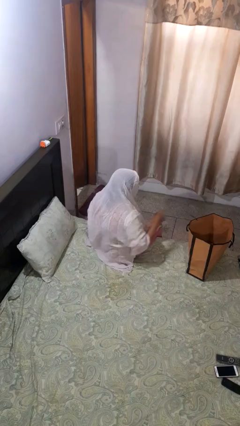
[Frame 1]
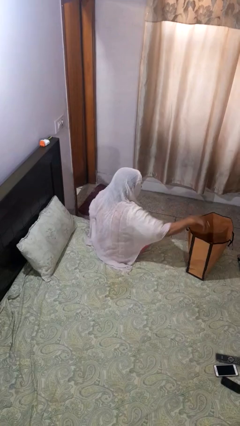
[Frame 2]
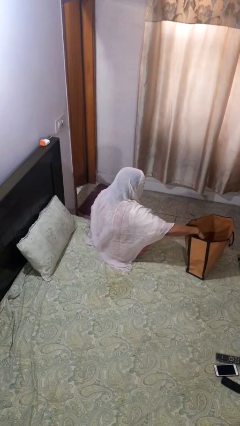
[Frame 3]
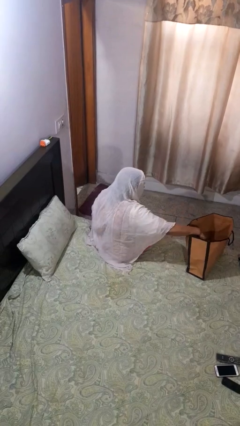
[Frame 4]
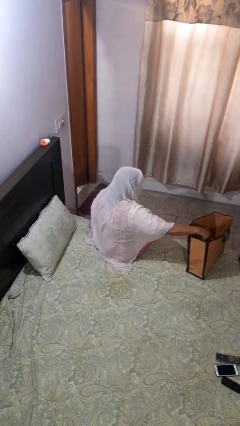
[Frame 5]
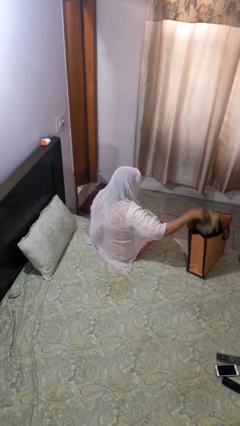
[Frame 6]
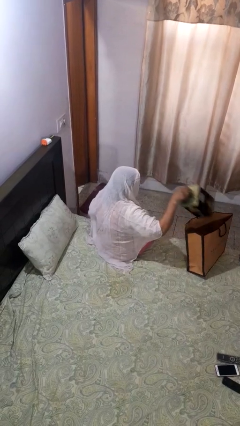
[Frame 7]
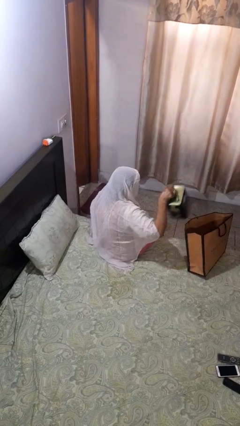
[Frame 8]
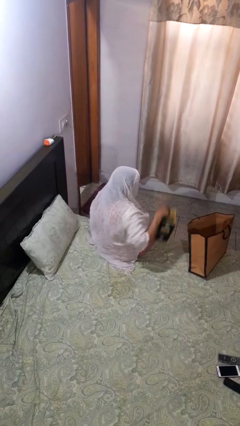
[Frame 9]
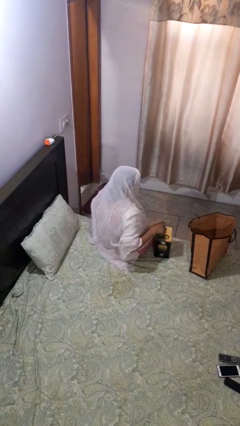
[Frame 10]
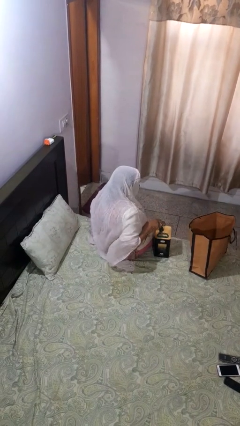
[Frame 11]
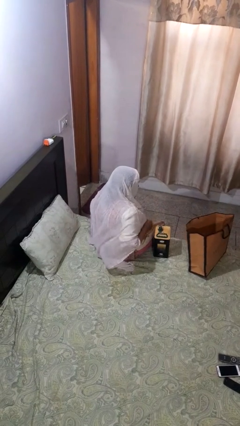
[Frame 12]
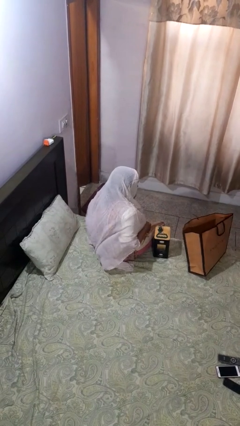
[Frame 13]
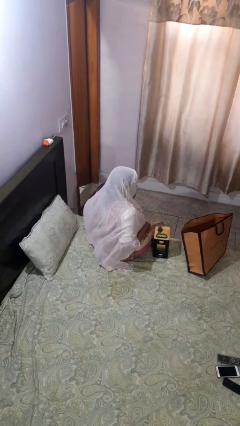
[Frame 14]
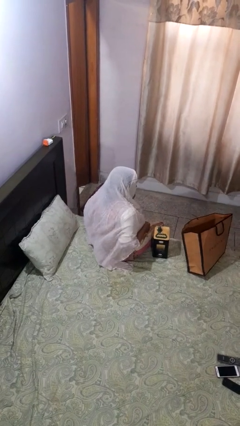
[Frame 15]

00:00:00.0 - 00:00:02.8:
person takes object from bag

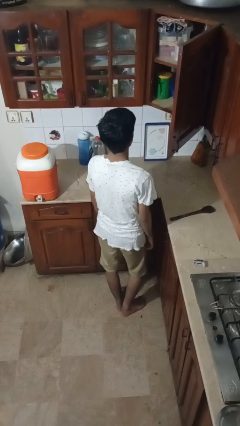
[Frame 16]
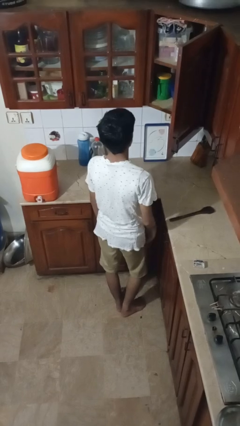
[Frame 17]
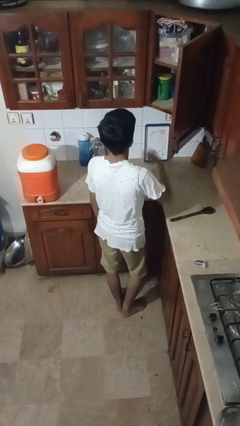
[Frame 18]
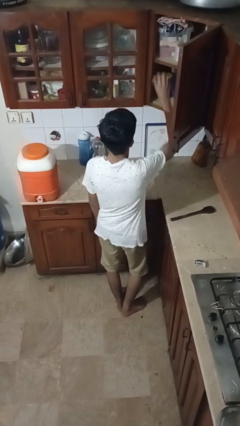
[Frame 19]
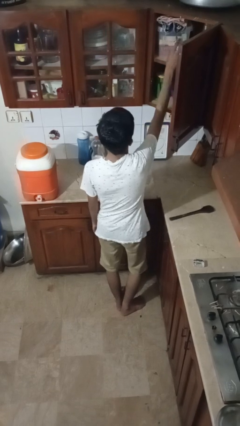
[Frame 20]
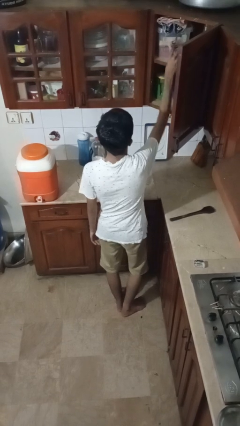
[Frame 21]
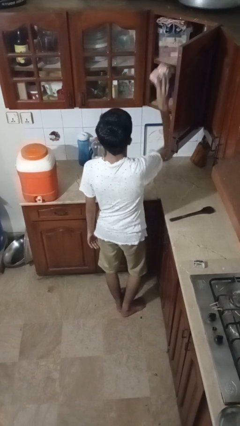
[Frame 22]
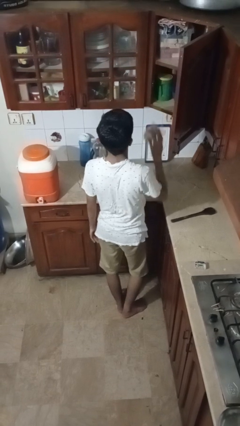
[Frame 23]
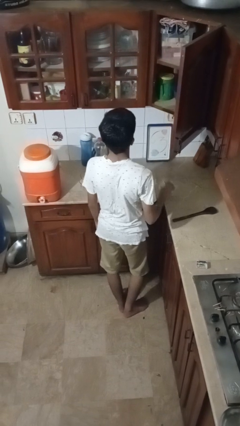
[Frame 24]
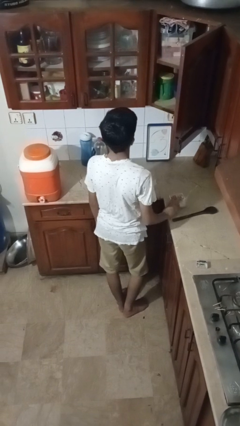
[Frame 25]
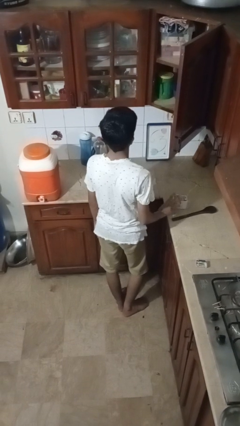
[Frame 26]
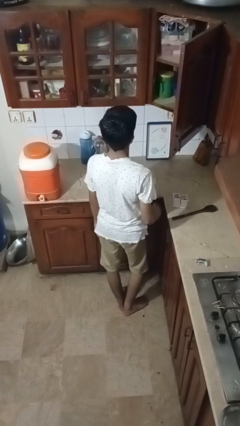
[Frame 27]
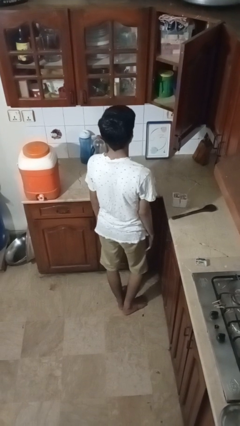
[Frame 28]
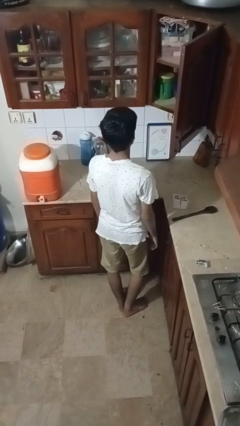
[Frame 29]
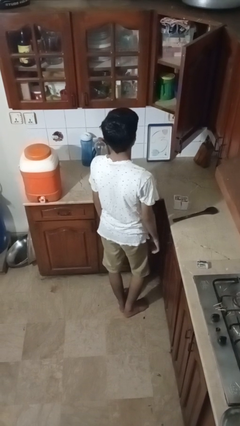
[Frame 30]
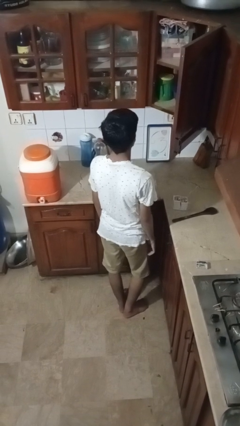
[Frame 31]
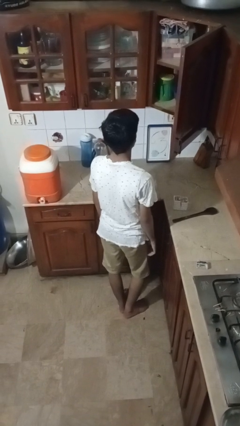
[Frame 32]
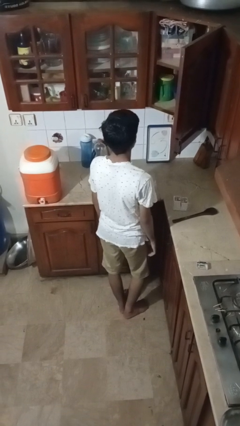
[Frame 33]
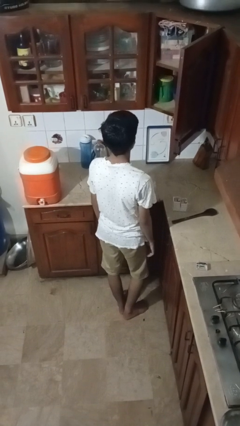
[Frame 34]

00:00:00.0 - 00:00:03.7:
person takes object from cabinet

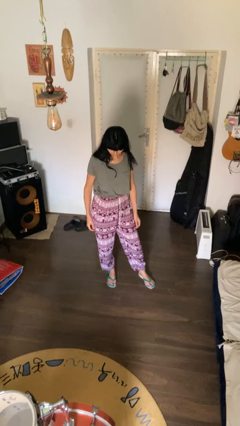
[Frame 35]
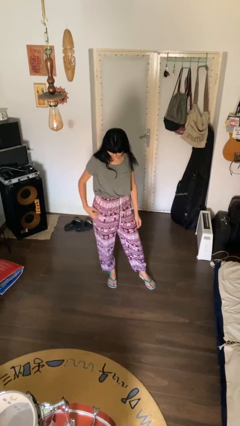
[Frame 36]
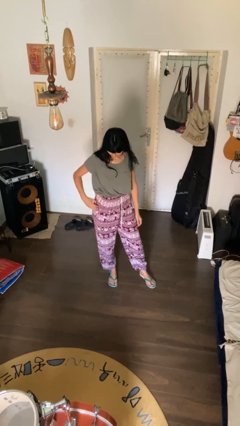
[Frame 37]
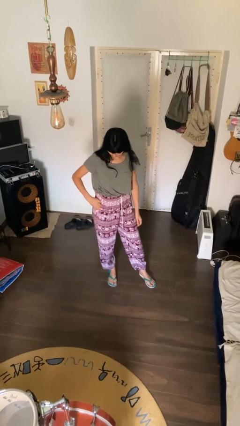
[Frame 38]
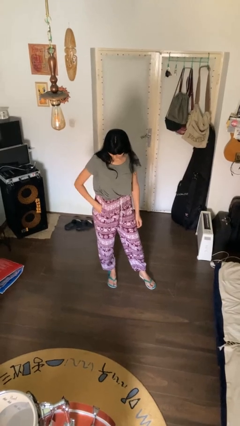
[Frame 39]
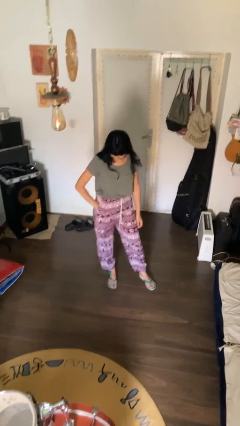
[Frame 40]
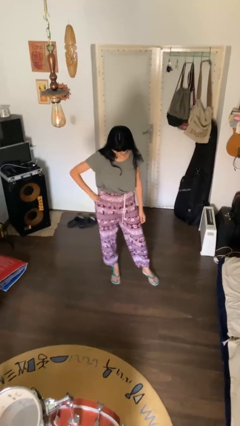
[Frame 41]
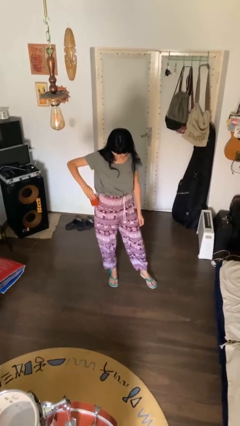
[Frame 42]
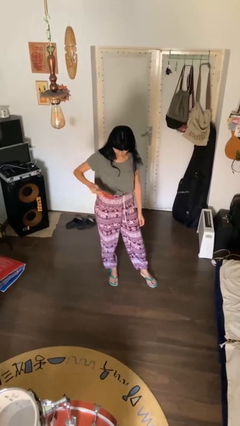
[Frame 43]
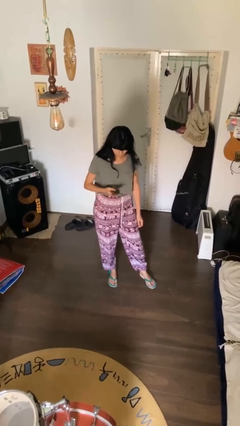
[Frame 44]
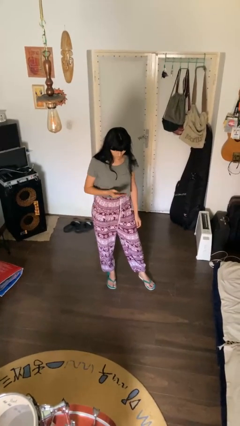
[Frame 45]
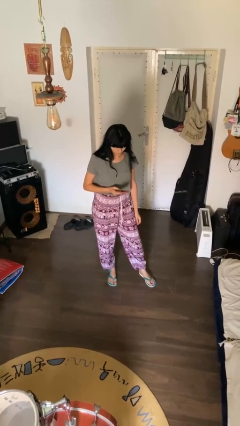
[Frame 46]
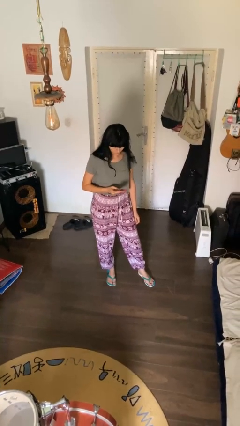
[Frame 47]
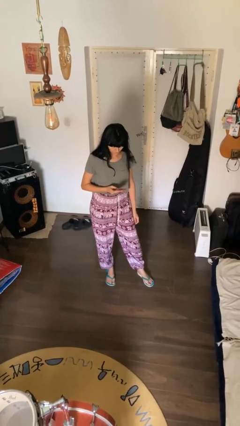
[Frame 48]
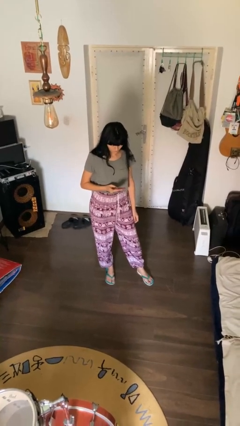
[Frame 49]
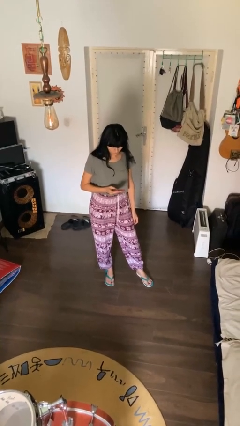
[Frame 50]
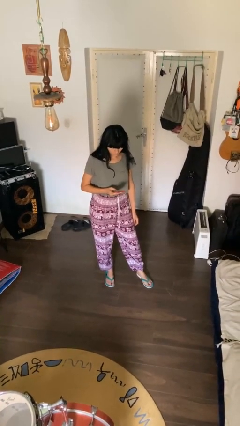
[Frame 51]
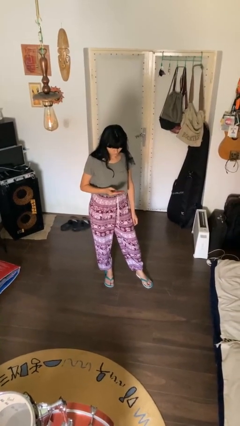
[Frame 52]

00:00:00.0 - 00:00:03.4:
person takes phone from pocket

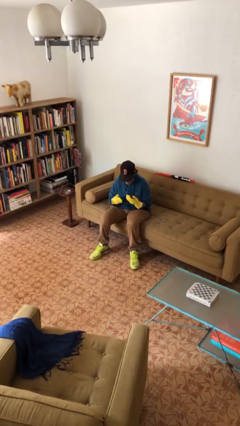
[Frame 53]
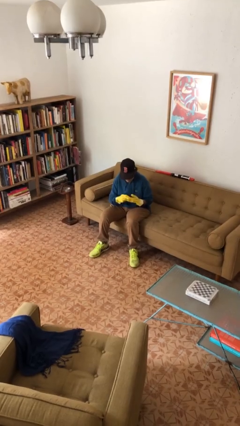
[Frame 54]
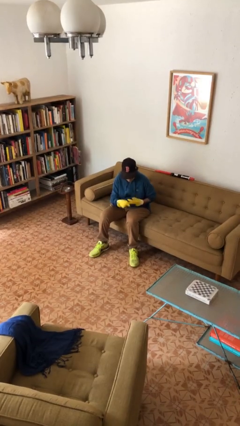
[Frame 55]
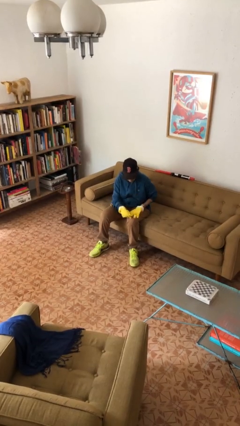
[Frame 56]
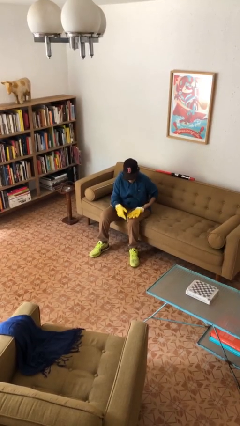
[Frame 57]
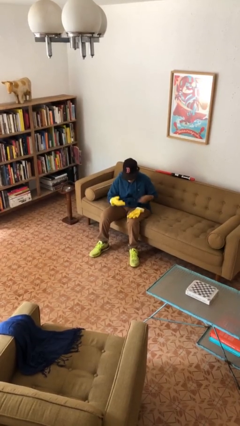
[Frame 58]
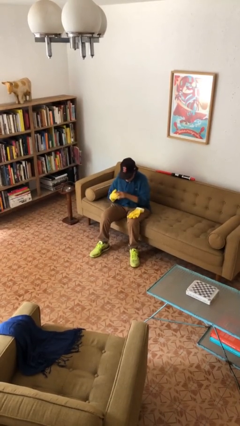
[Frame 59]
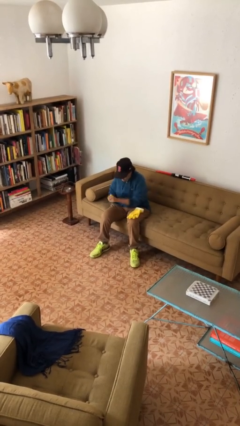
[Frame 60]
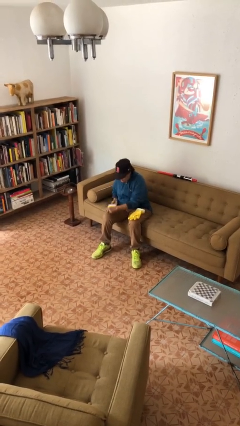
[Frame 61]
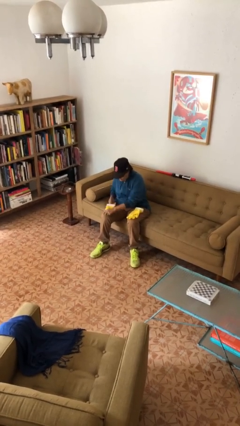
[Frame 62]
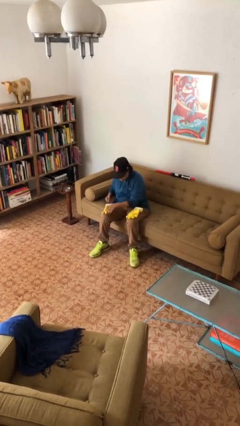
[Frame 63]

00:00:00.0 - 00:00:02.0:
person takes off gloves

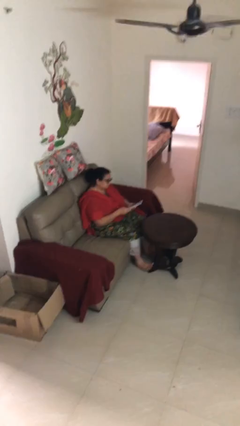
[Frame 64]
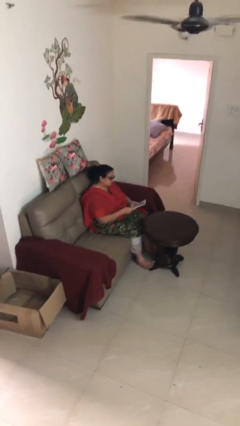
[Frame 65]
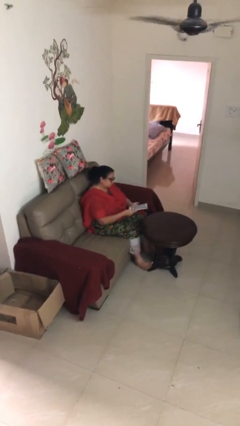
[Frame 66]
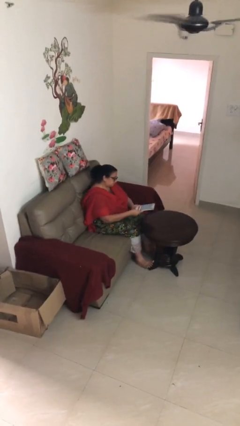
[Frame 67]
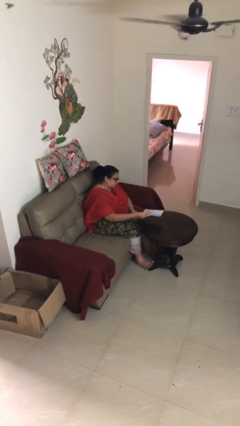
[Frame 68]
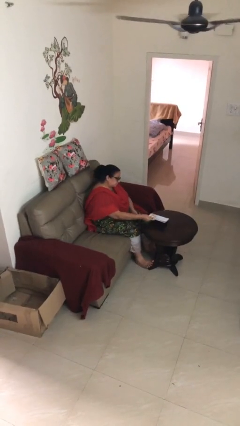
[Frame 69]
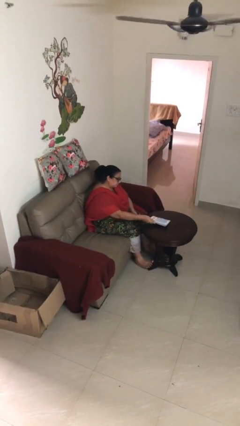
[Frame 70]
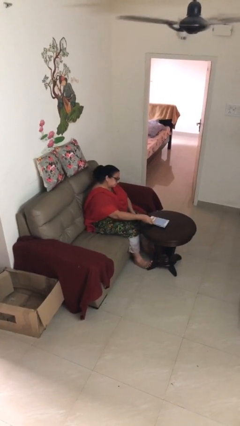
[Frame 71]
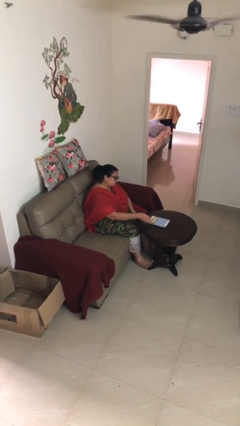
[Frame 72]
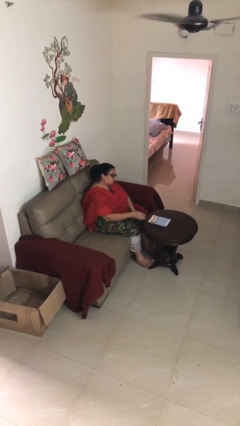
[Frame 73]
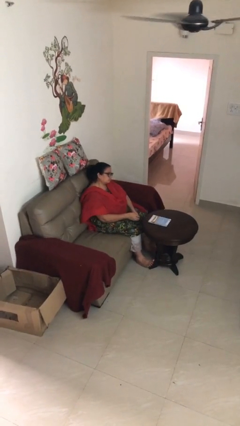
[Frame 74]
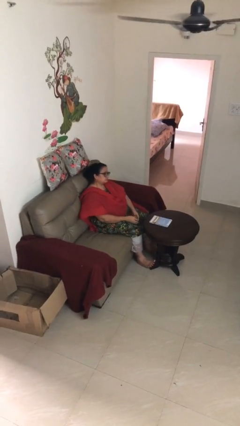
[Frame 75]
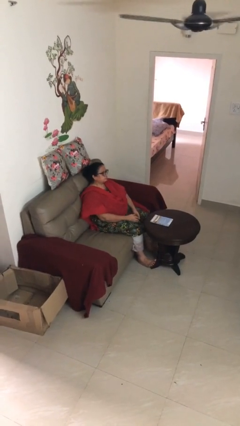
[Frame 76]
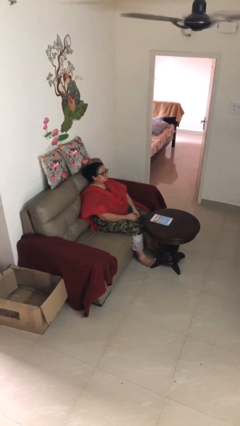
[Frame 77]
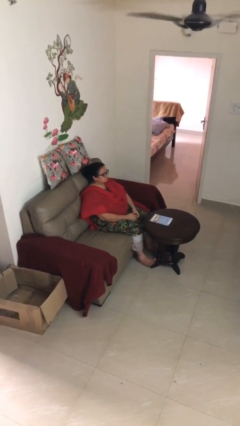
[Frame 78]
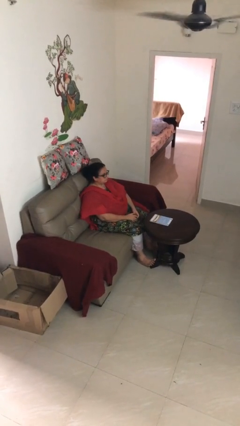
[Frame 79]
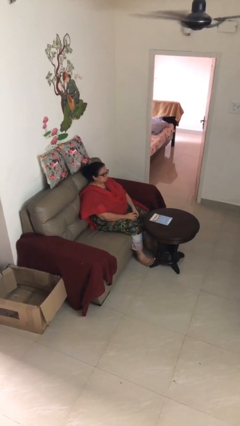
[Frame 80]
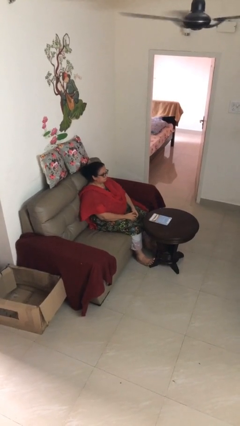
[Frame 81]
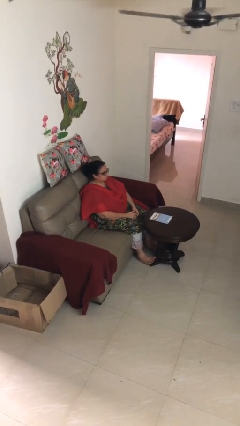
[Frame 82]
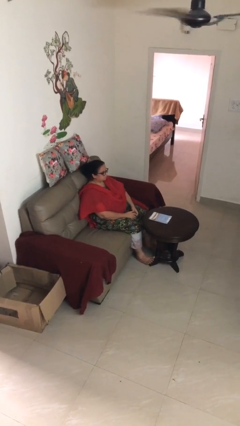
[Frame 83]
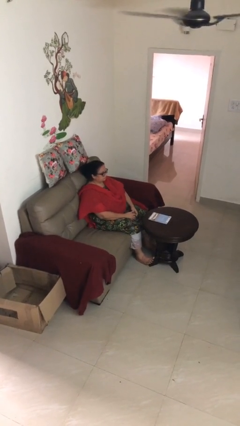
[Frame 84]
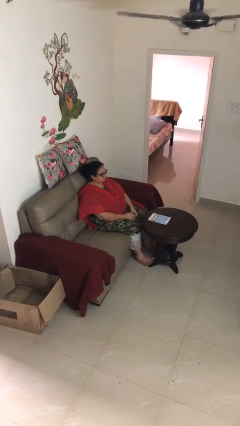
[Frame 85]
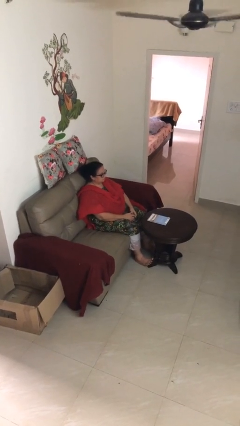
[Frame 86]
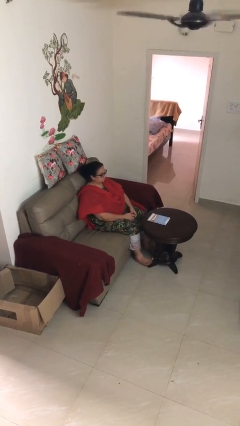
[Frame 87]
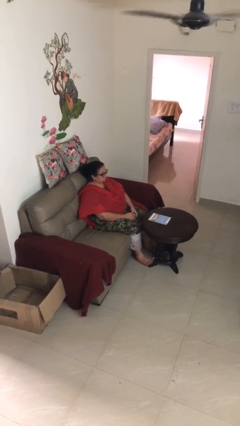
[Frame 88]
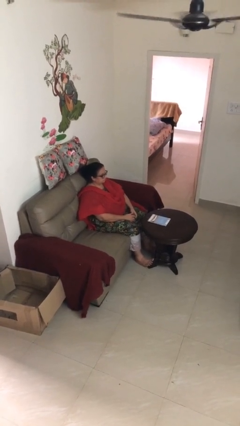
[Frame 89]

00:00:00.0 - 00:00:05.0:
person puts down object on table

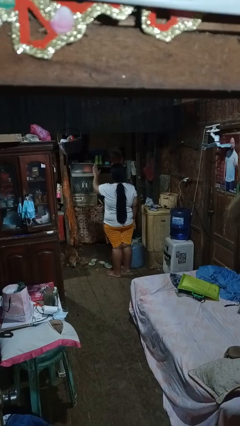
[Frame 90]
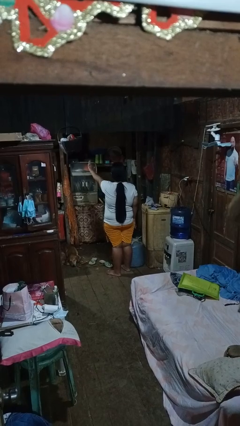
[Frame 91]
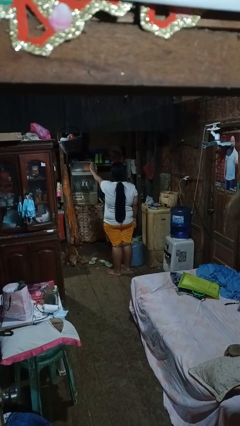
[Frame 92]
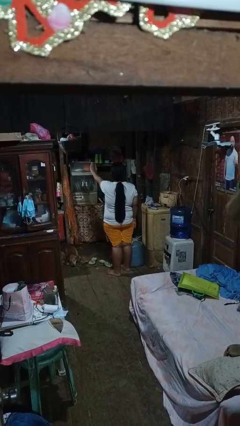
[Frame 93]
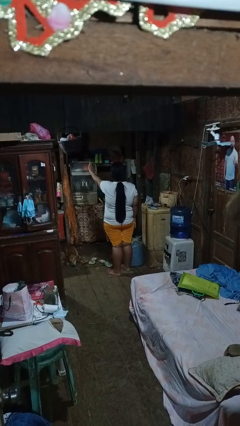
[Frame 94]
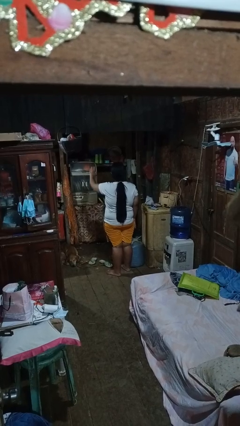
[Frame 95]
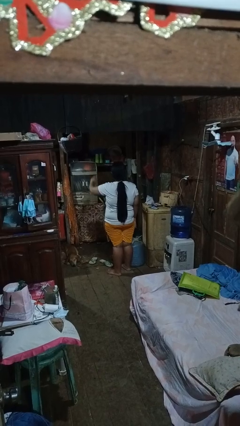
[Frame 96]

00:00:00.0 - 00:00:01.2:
person gestures stop
